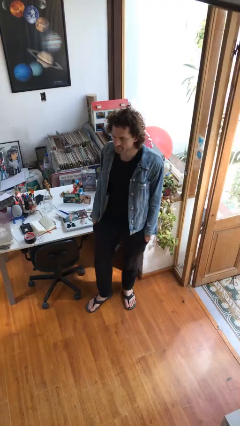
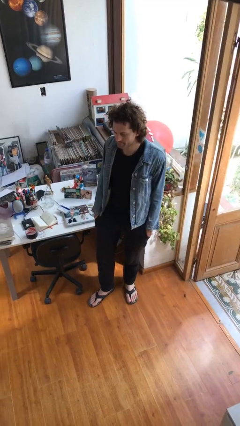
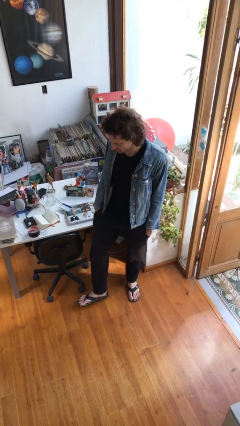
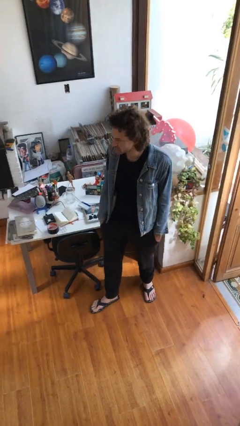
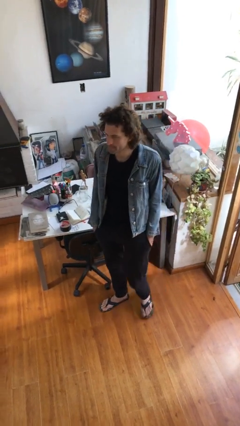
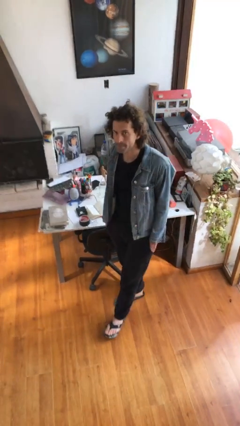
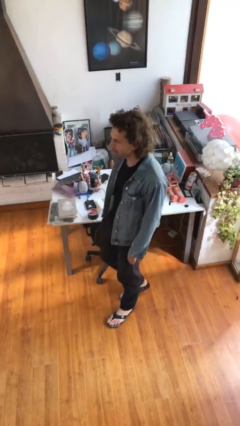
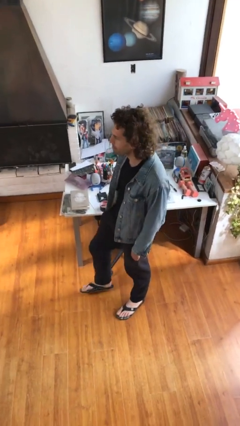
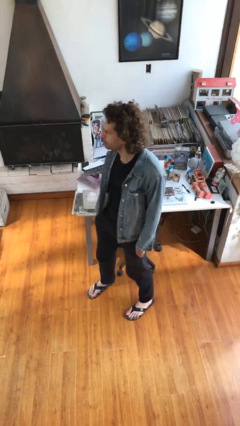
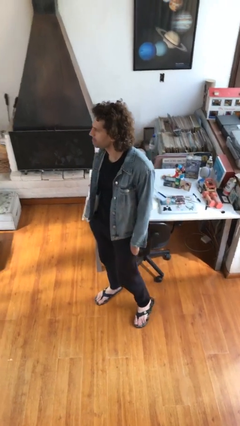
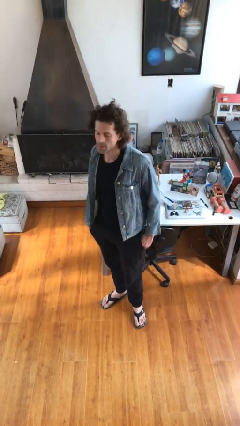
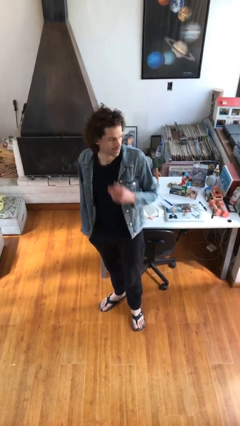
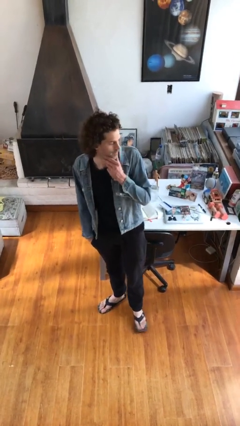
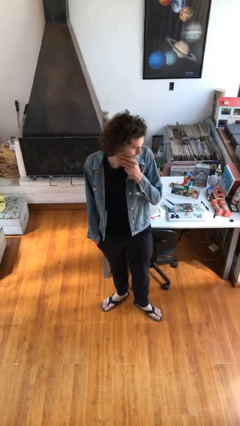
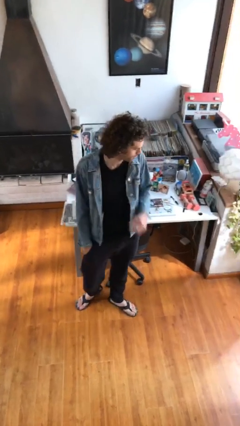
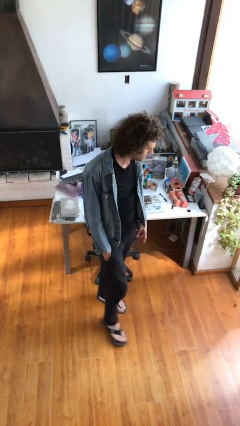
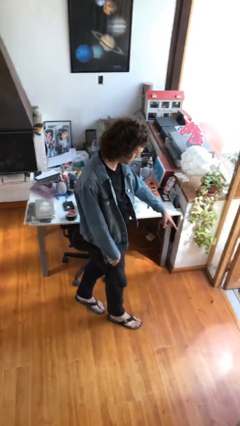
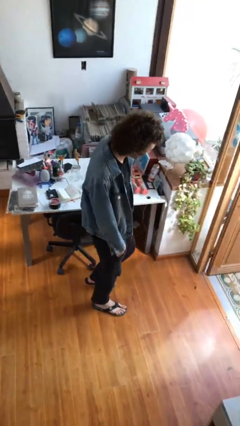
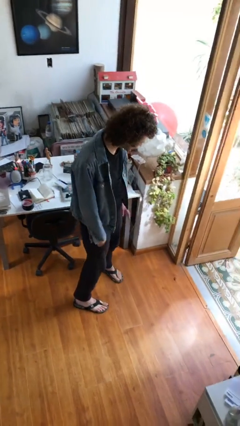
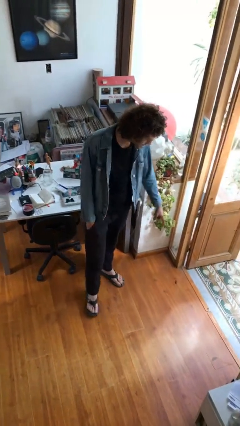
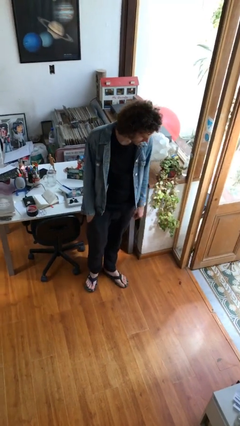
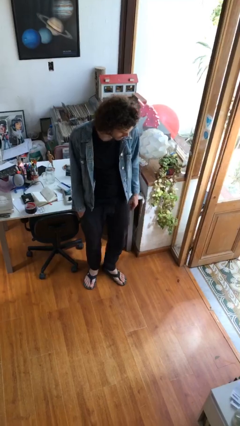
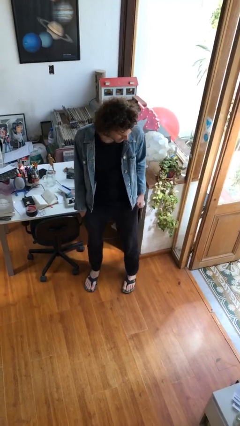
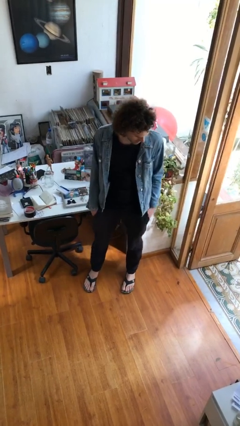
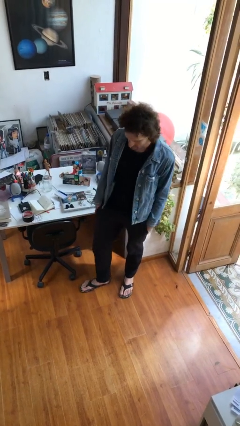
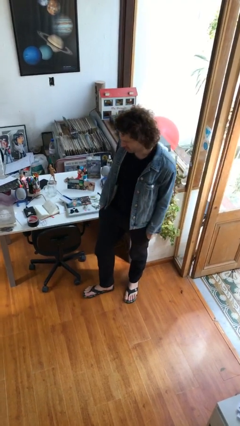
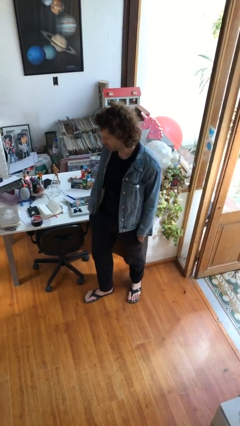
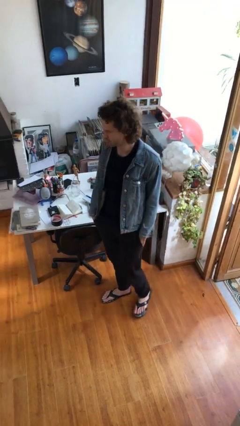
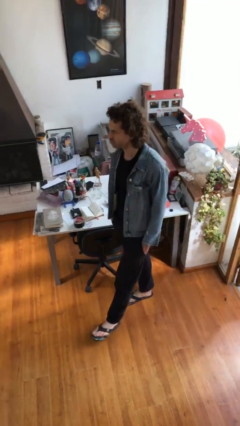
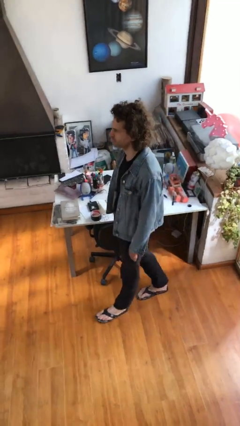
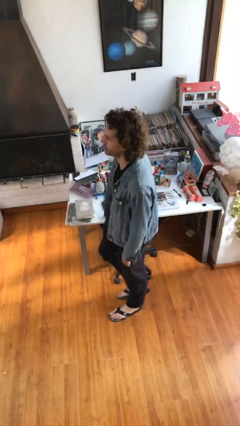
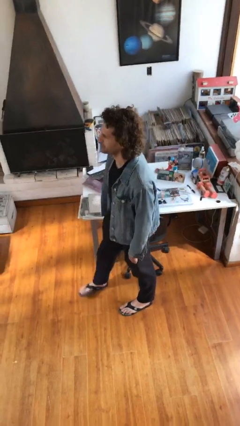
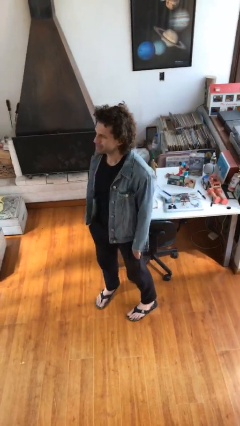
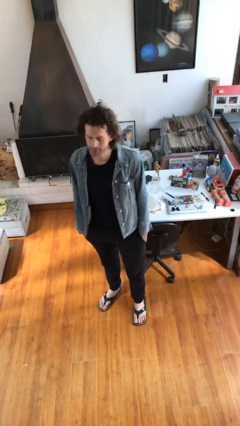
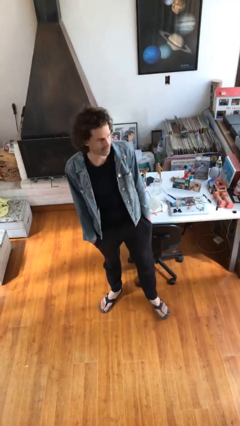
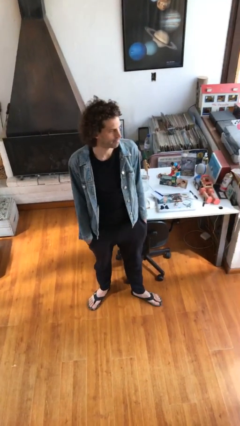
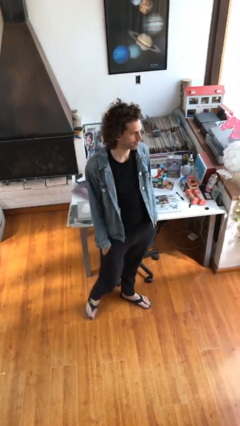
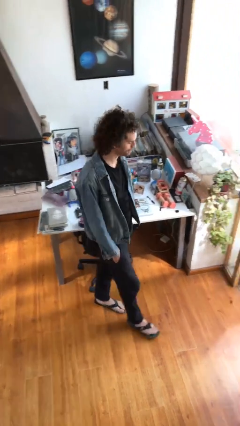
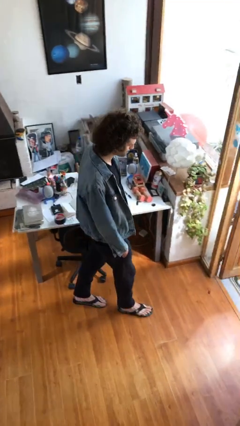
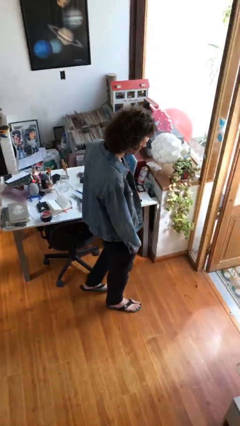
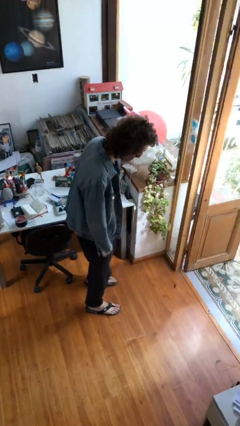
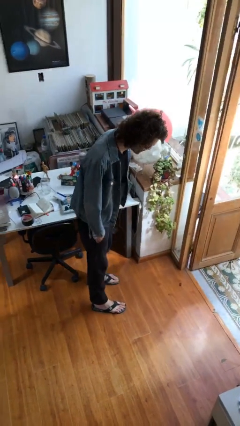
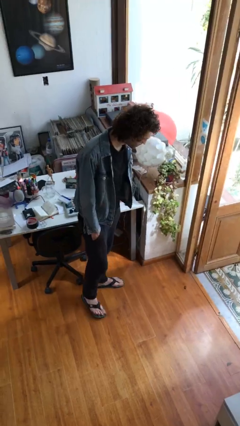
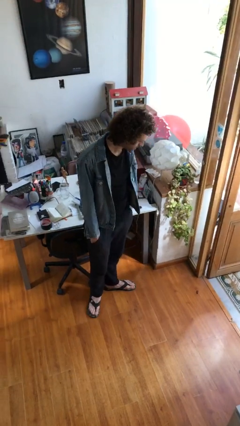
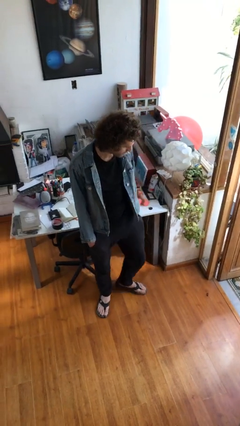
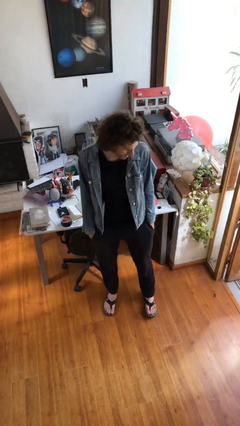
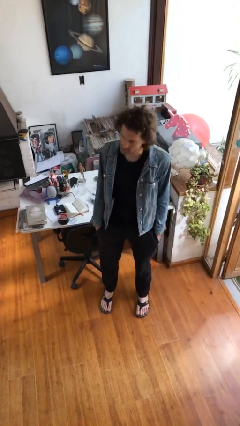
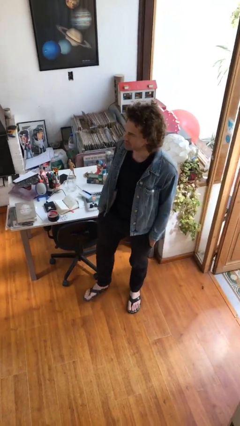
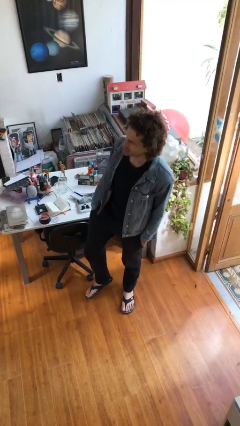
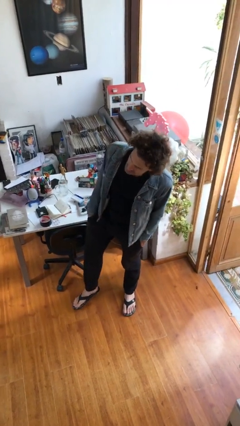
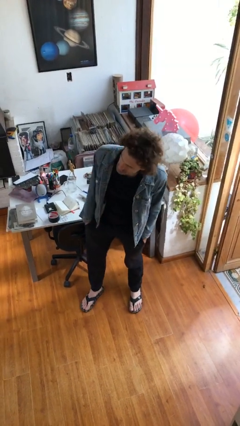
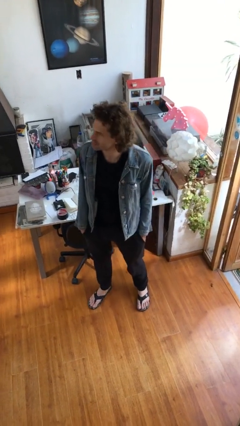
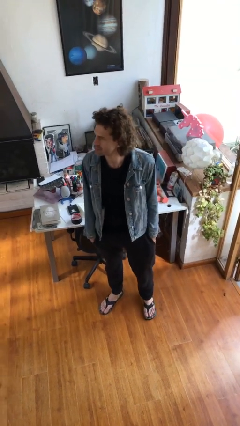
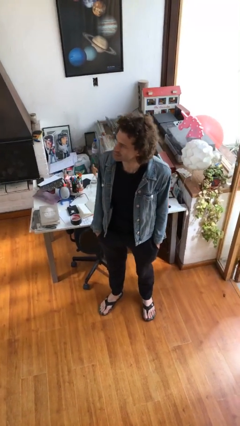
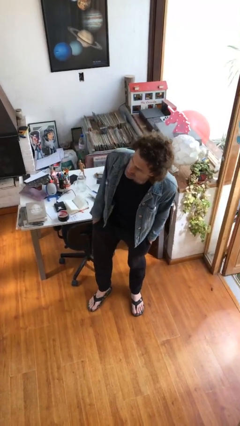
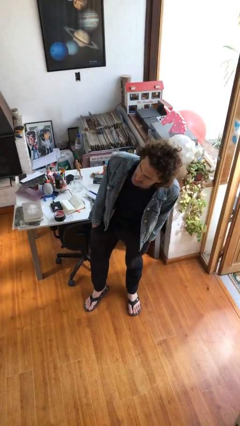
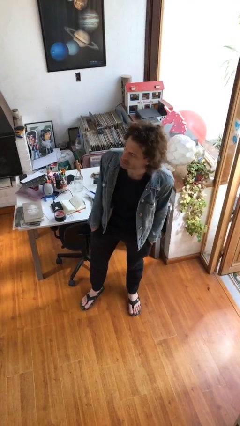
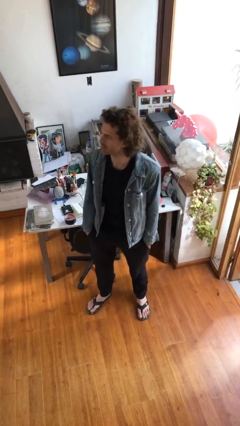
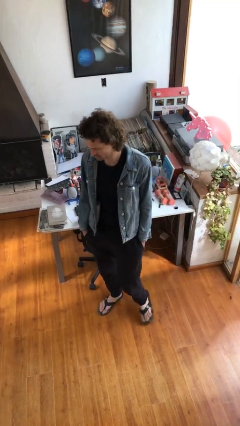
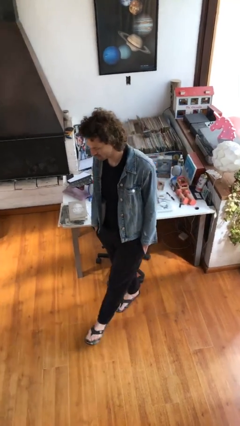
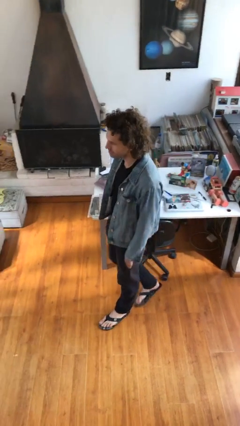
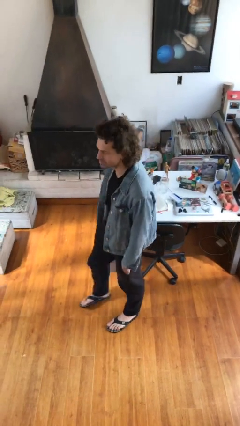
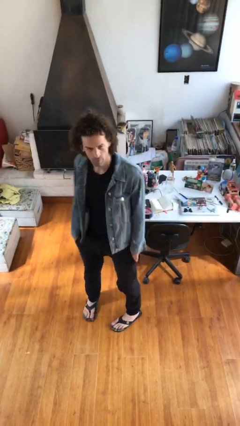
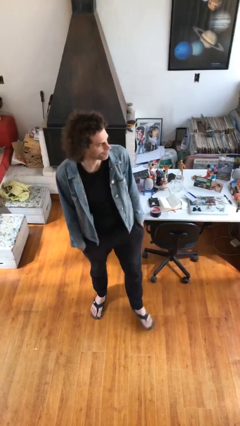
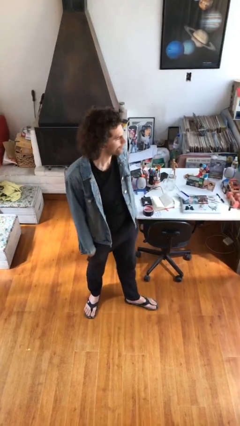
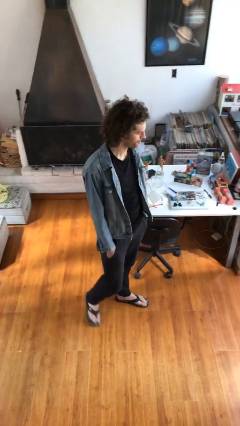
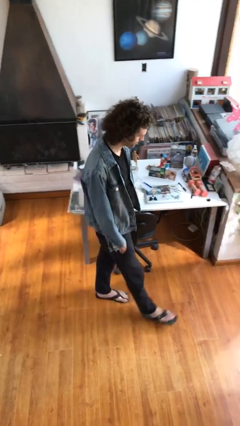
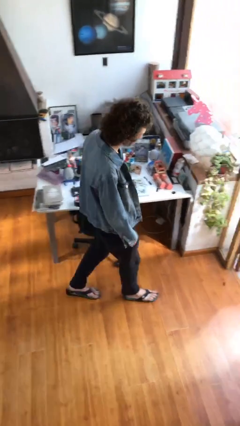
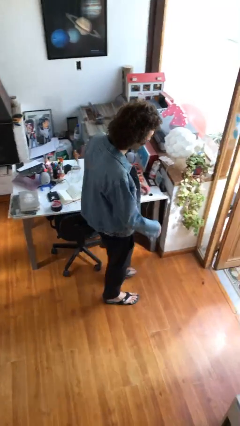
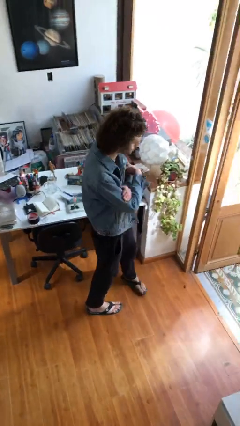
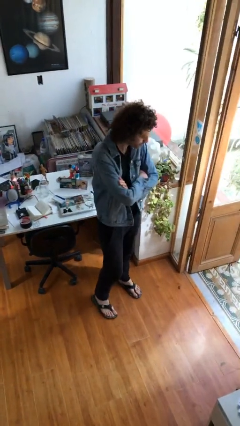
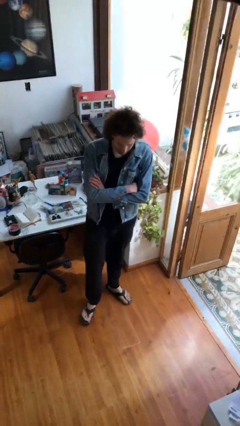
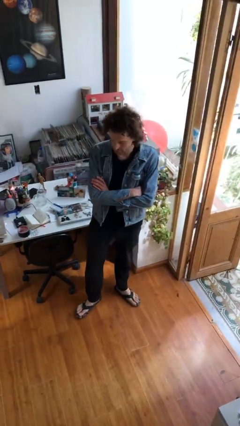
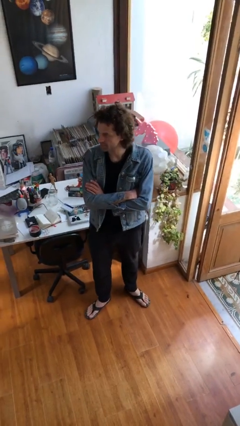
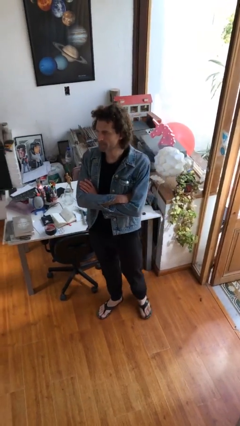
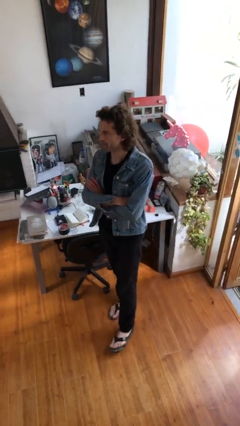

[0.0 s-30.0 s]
person walks

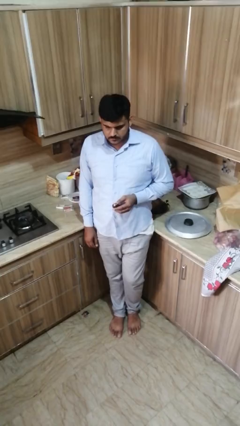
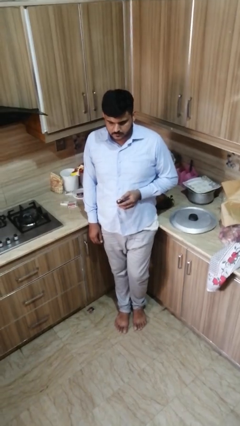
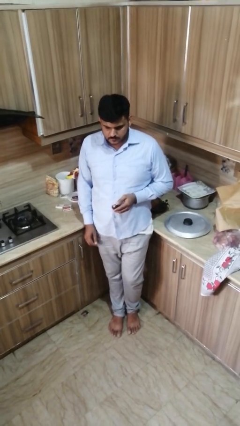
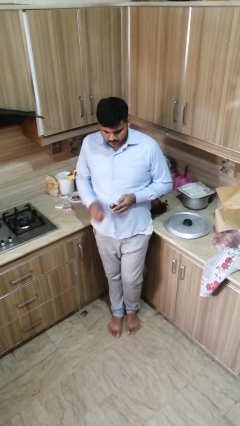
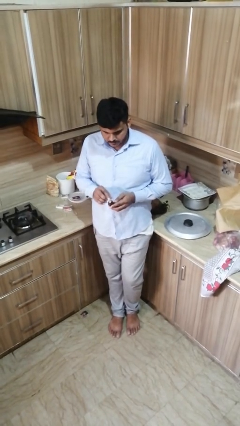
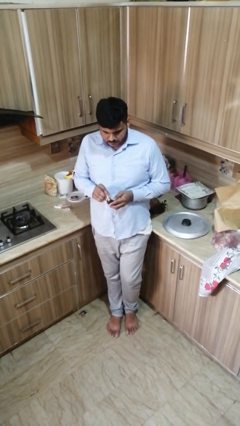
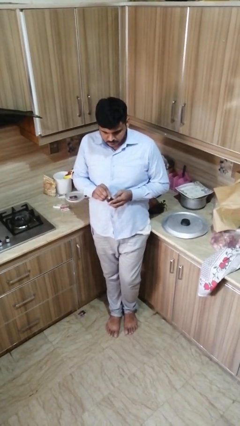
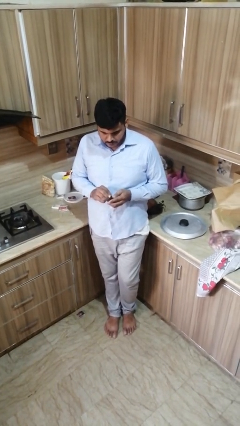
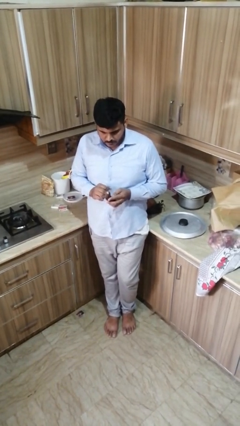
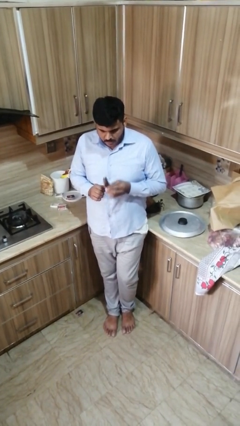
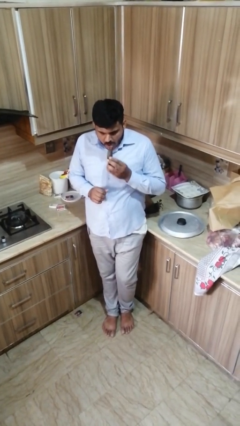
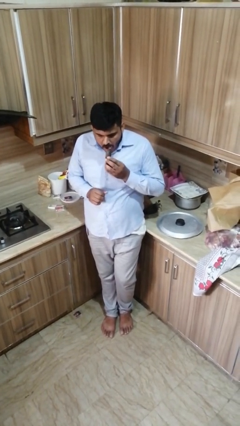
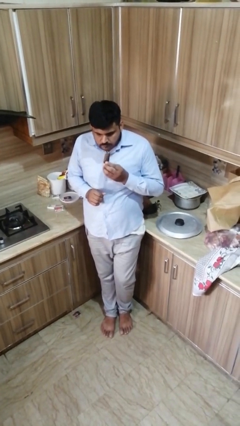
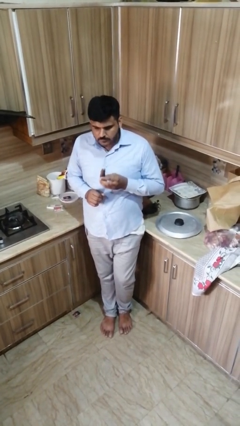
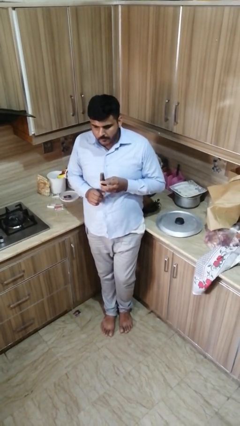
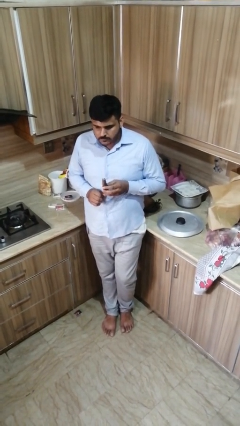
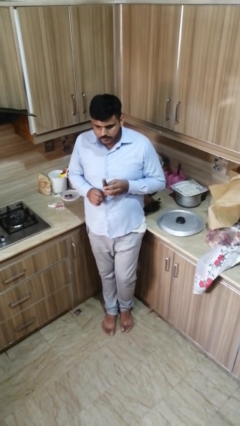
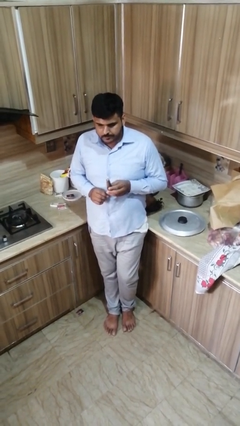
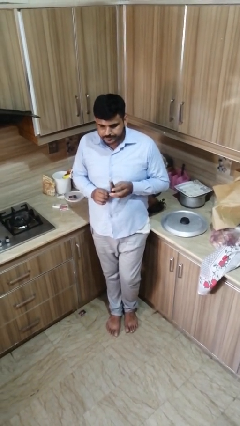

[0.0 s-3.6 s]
person eats banana
